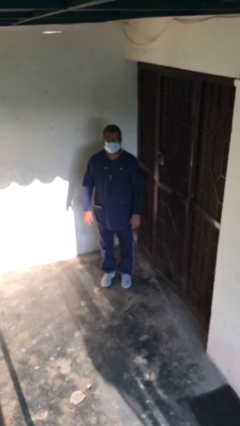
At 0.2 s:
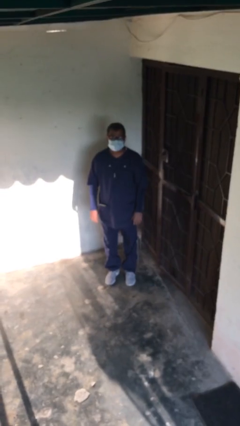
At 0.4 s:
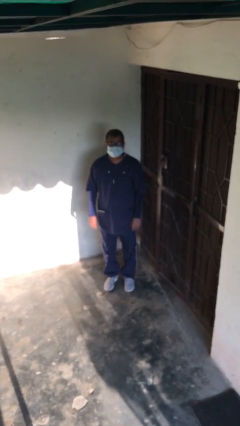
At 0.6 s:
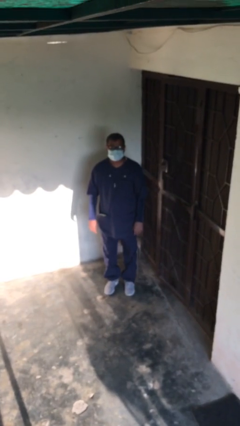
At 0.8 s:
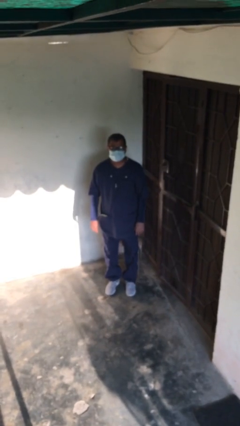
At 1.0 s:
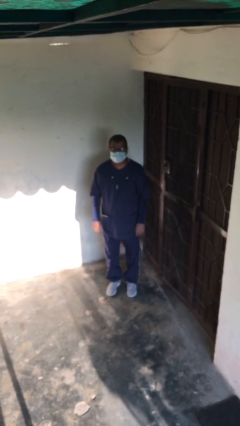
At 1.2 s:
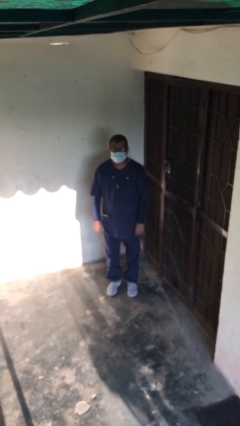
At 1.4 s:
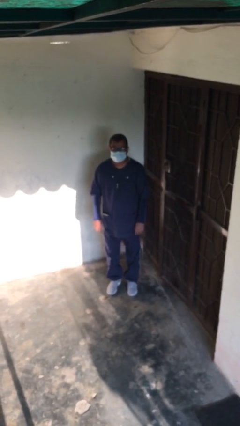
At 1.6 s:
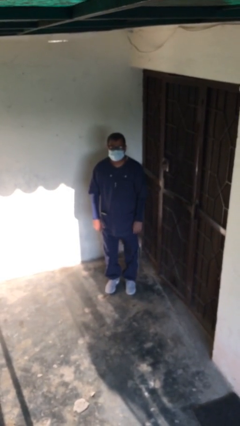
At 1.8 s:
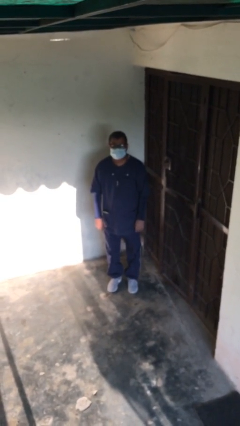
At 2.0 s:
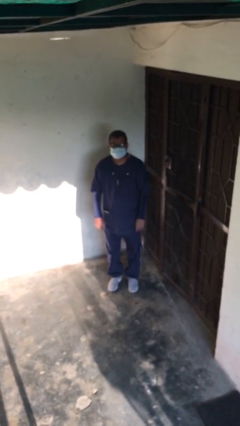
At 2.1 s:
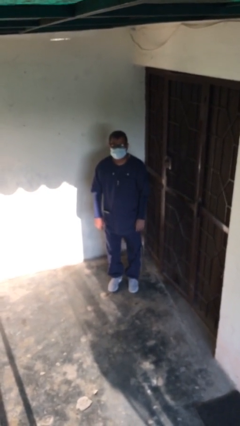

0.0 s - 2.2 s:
person stands up

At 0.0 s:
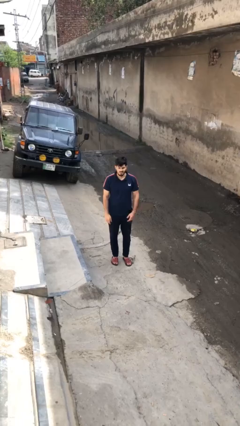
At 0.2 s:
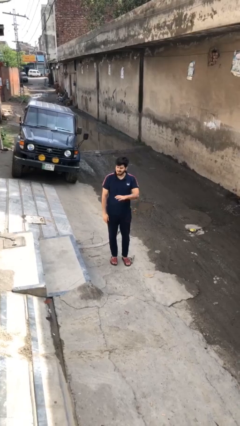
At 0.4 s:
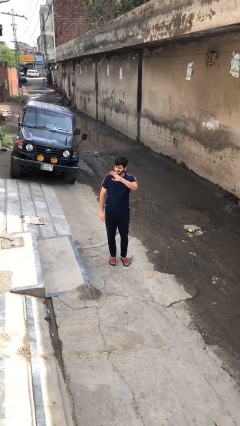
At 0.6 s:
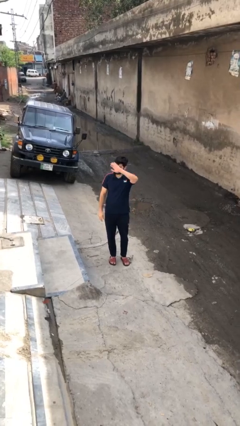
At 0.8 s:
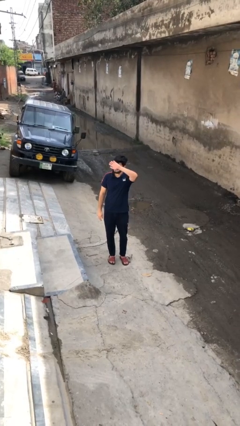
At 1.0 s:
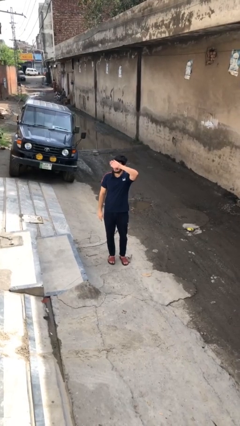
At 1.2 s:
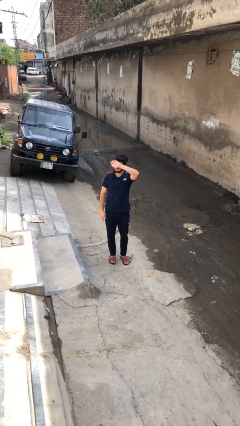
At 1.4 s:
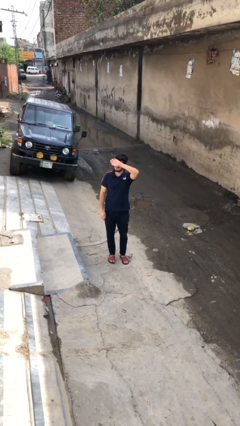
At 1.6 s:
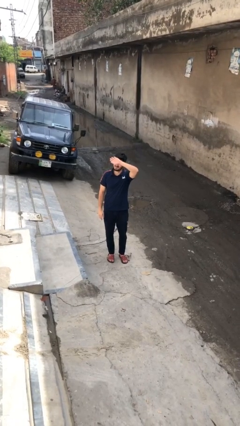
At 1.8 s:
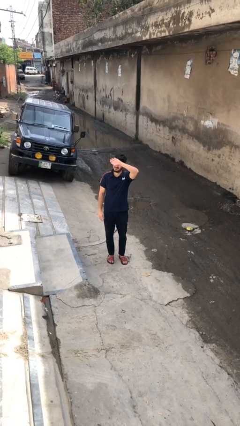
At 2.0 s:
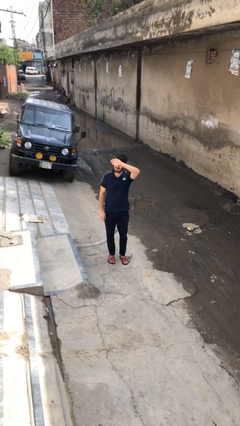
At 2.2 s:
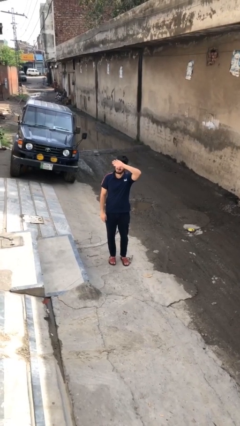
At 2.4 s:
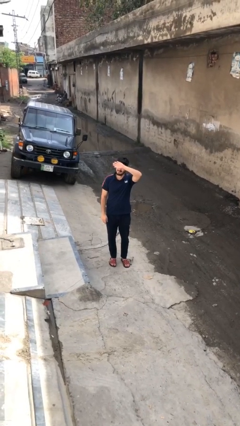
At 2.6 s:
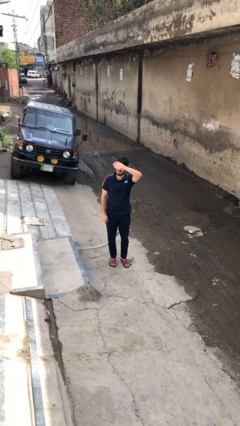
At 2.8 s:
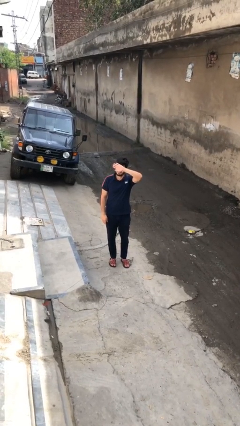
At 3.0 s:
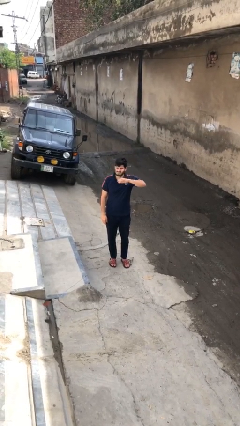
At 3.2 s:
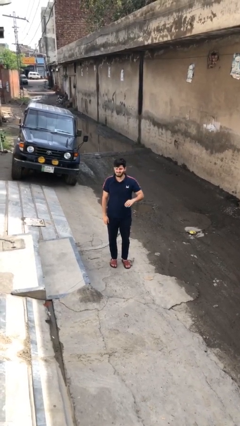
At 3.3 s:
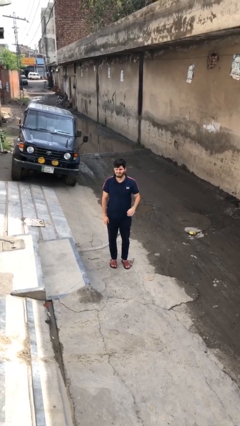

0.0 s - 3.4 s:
person shades eyes

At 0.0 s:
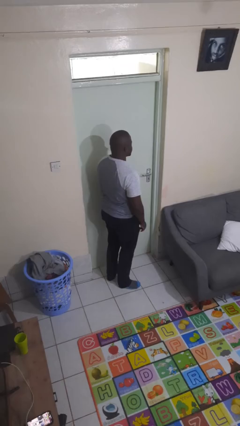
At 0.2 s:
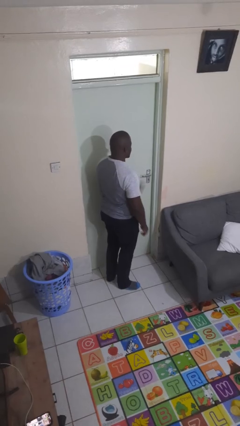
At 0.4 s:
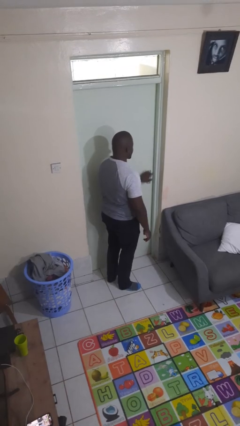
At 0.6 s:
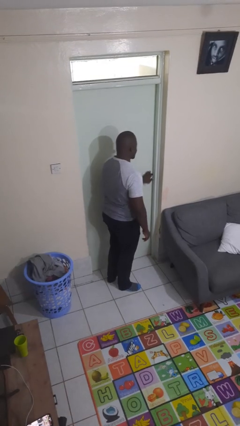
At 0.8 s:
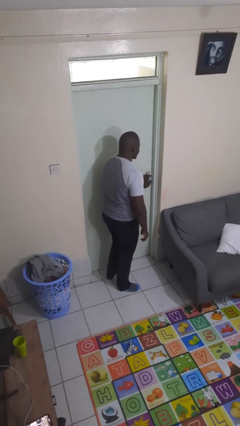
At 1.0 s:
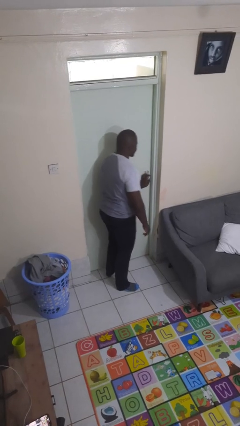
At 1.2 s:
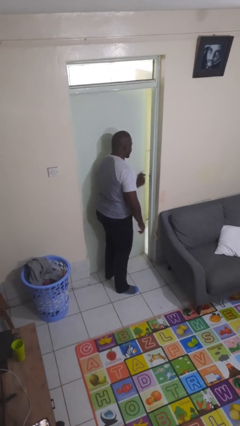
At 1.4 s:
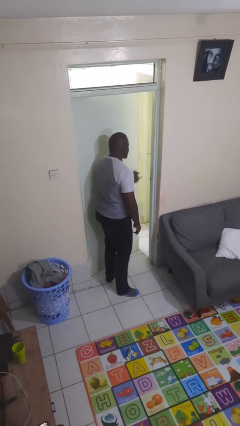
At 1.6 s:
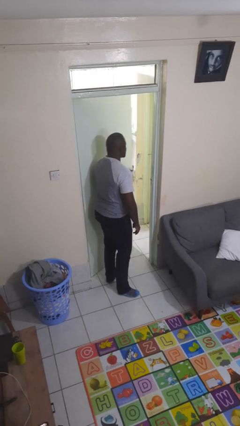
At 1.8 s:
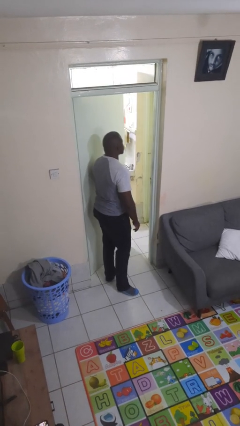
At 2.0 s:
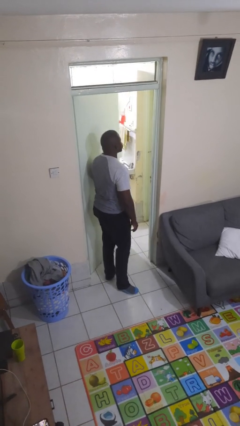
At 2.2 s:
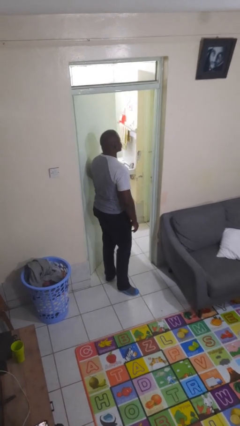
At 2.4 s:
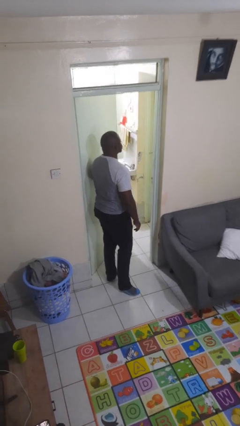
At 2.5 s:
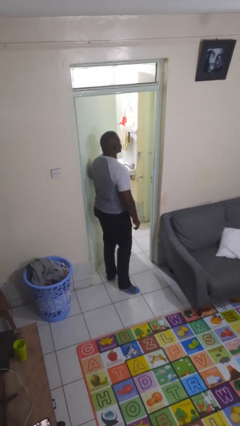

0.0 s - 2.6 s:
person opens facility door

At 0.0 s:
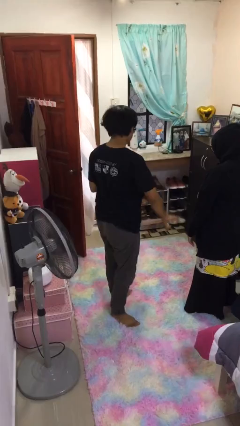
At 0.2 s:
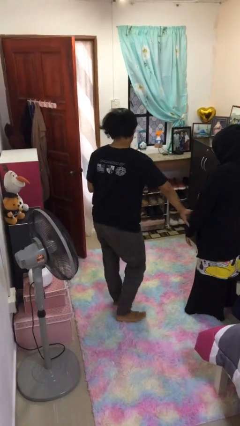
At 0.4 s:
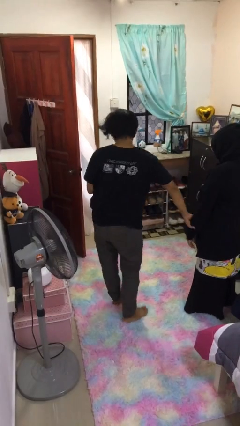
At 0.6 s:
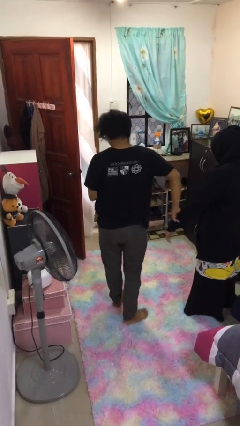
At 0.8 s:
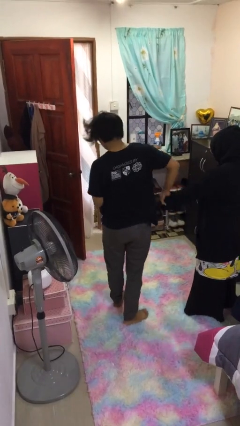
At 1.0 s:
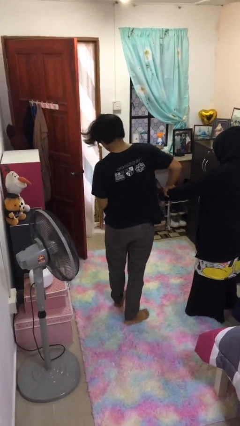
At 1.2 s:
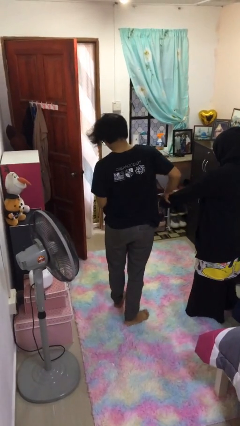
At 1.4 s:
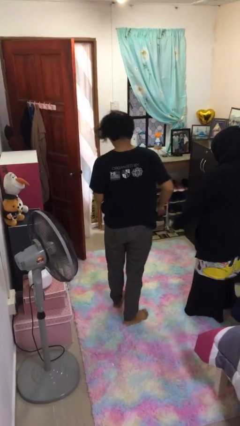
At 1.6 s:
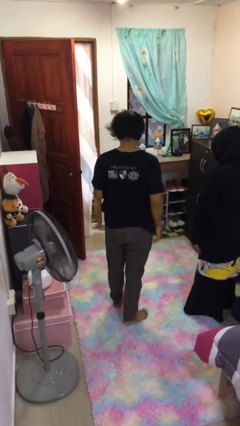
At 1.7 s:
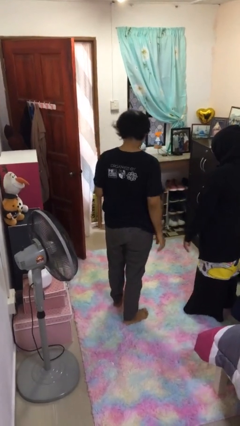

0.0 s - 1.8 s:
person grabs person by forearm

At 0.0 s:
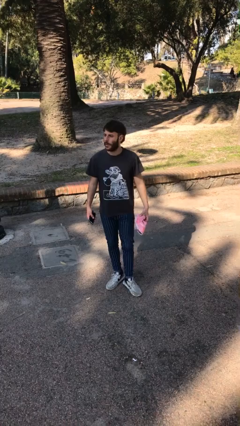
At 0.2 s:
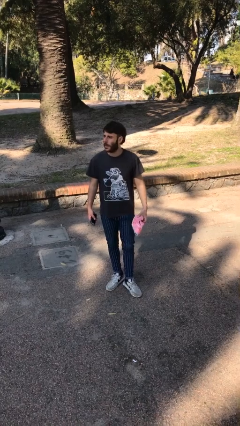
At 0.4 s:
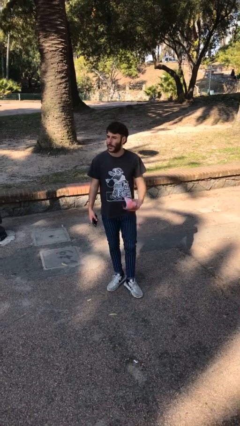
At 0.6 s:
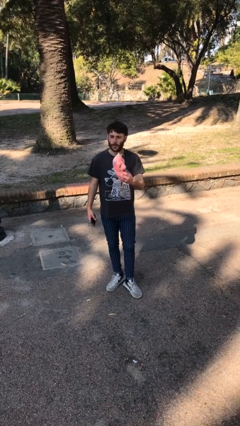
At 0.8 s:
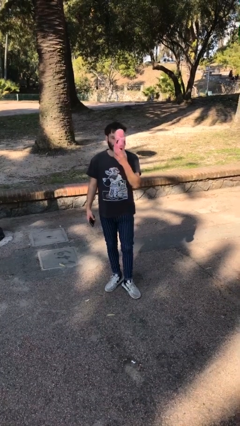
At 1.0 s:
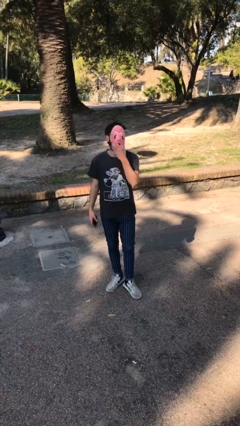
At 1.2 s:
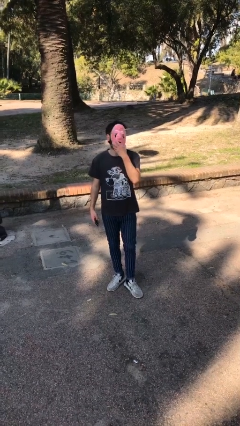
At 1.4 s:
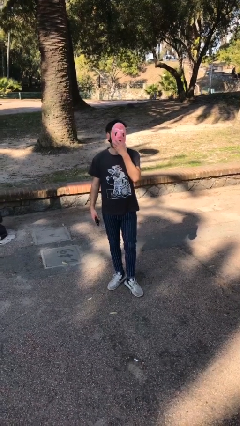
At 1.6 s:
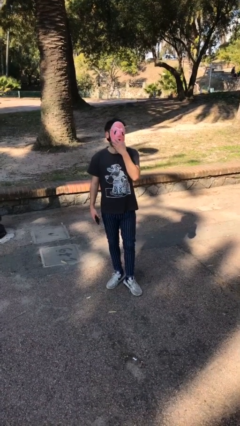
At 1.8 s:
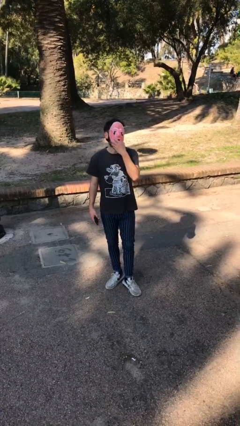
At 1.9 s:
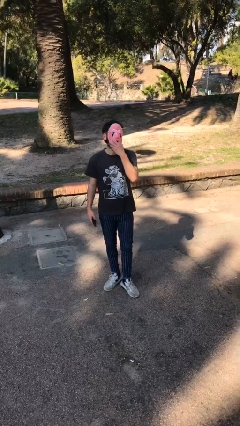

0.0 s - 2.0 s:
person puts on facemask

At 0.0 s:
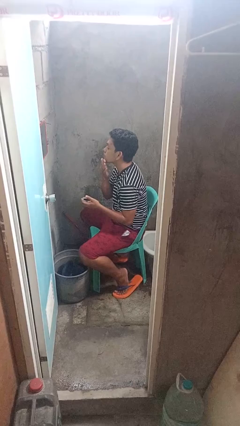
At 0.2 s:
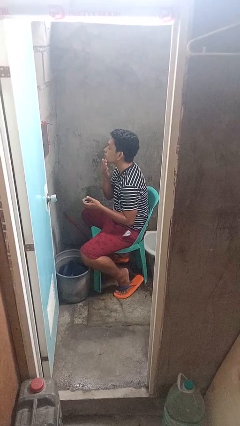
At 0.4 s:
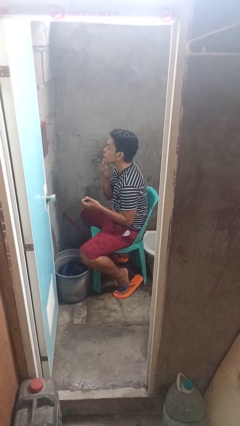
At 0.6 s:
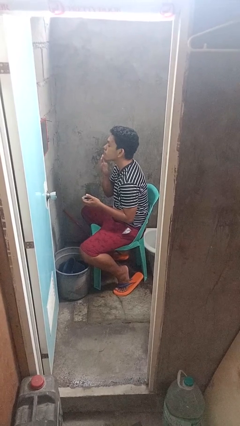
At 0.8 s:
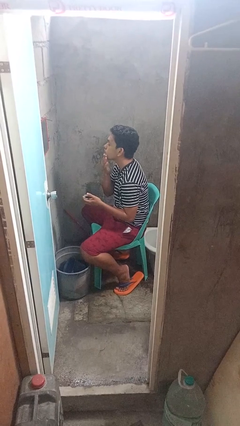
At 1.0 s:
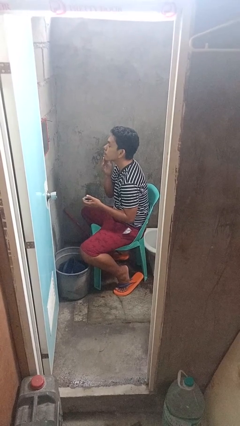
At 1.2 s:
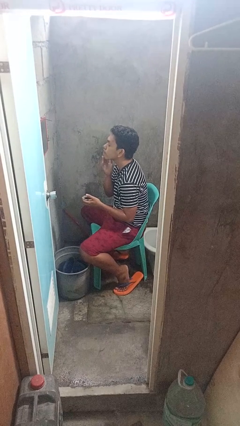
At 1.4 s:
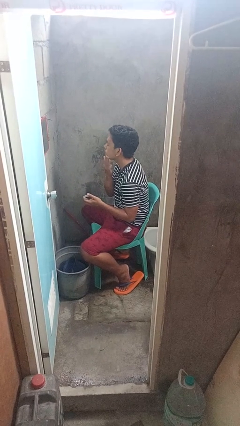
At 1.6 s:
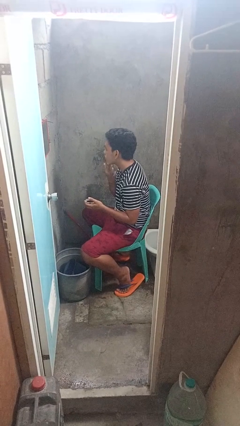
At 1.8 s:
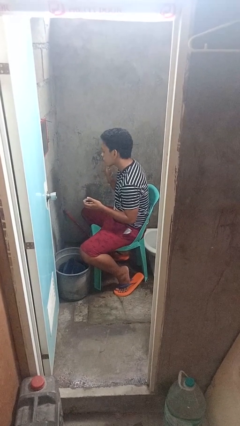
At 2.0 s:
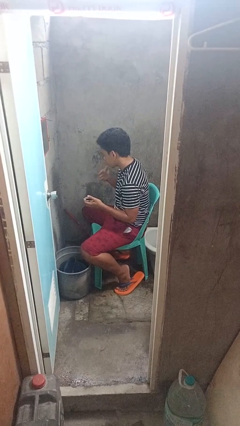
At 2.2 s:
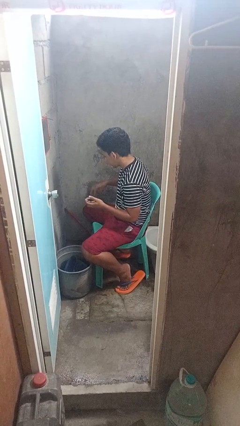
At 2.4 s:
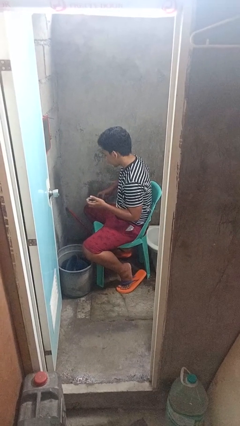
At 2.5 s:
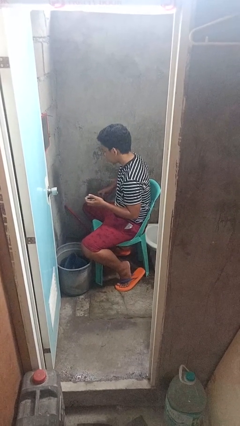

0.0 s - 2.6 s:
person applies shaving cream

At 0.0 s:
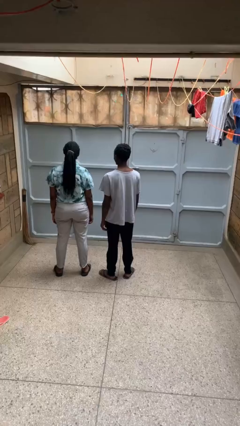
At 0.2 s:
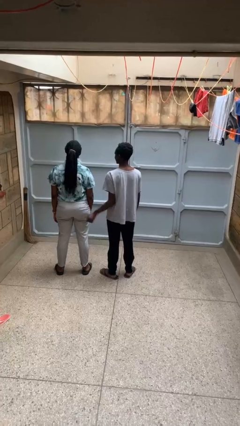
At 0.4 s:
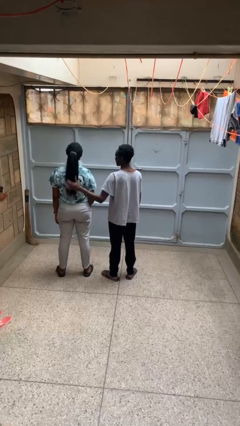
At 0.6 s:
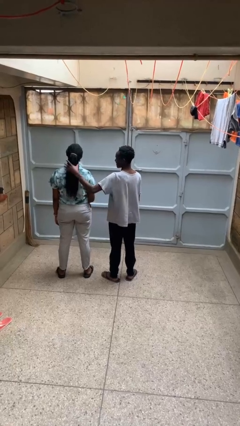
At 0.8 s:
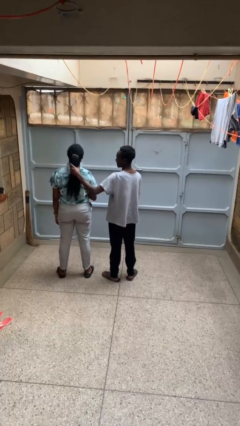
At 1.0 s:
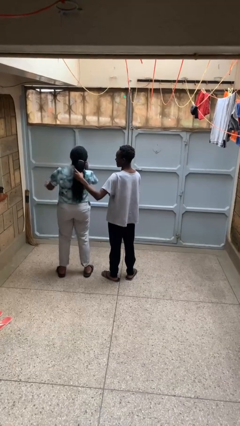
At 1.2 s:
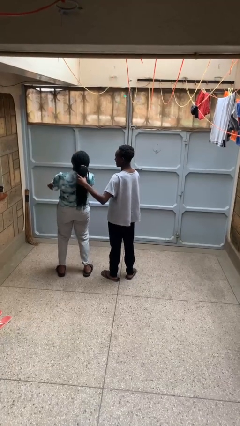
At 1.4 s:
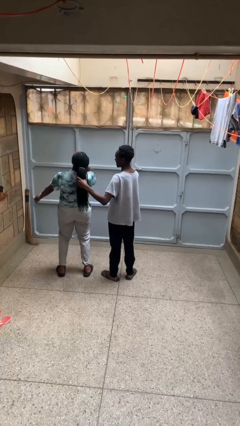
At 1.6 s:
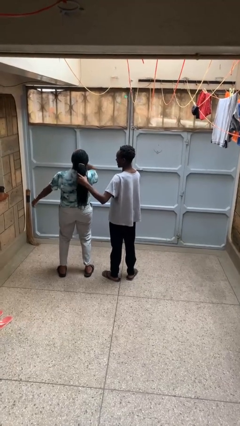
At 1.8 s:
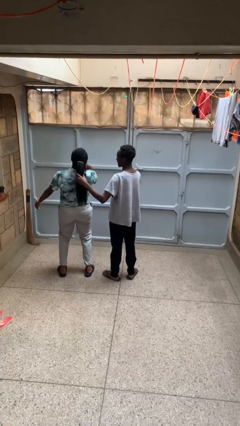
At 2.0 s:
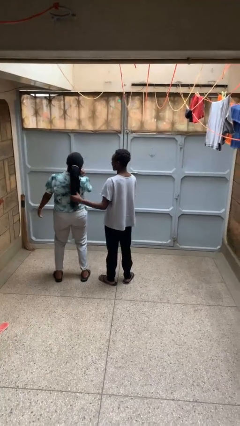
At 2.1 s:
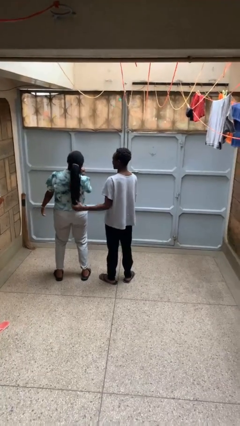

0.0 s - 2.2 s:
person grabs person by hair

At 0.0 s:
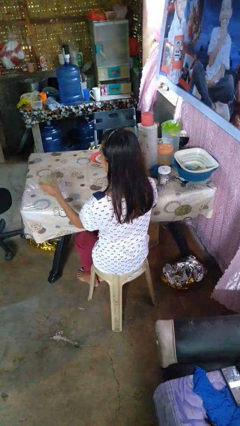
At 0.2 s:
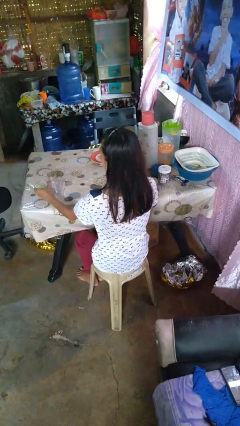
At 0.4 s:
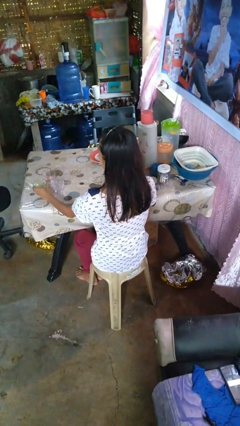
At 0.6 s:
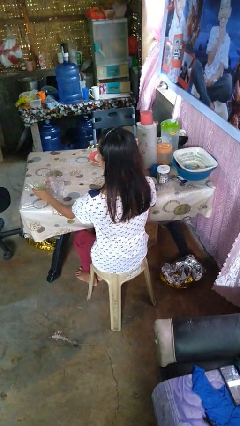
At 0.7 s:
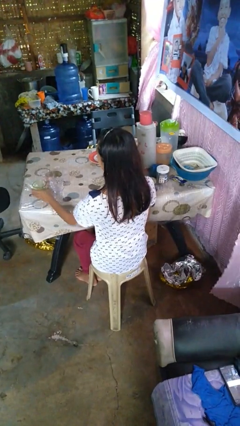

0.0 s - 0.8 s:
person puts down object on table
